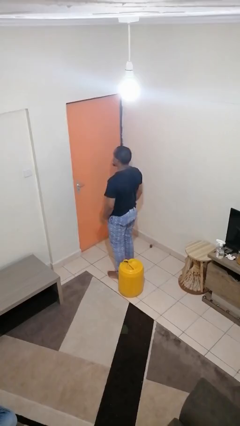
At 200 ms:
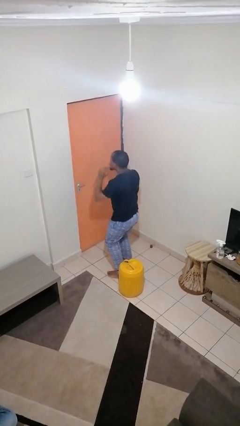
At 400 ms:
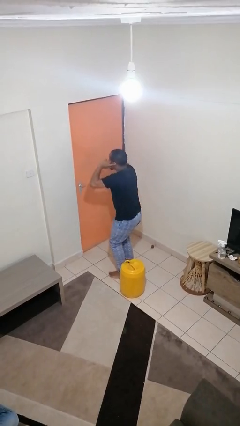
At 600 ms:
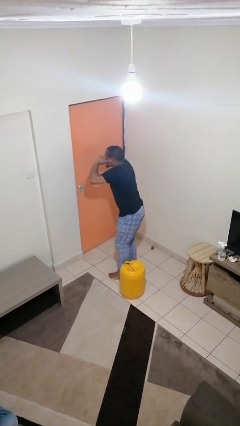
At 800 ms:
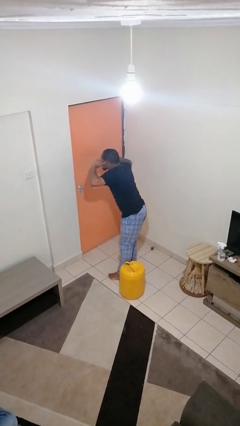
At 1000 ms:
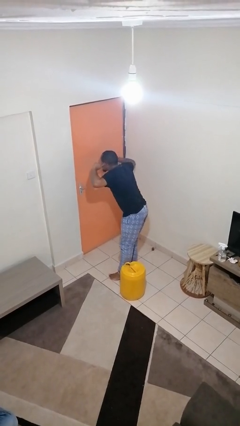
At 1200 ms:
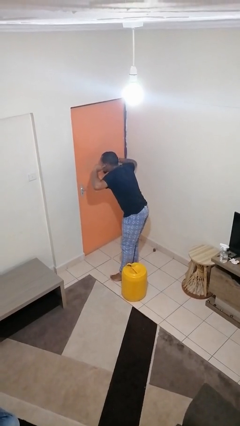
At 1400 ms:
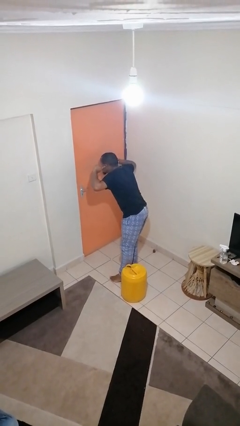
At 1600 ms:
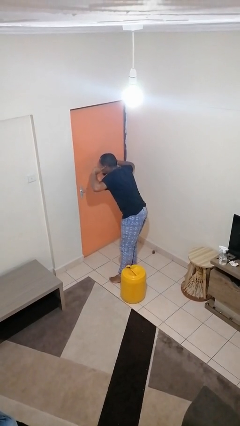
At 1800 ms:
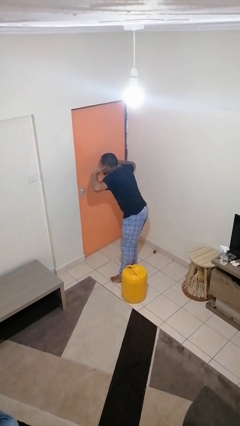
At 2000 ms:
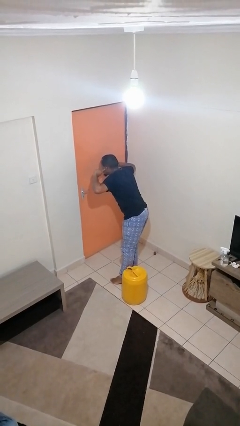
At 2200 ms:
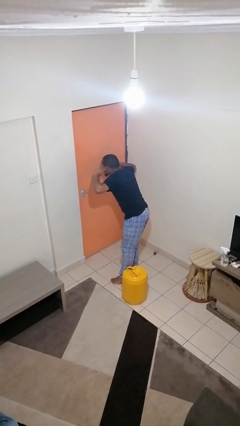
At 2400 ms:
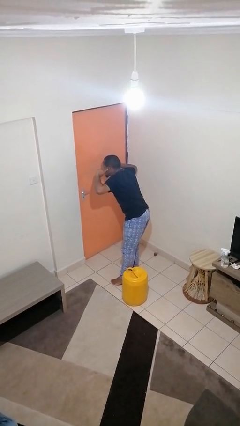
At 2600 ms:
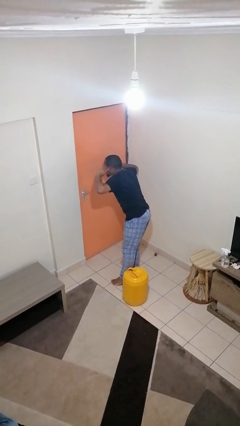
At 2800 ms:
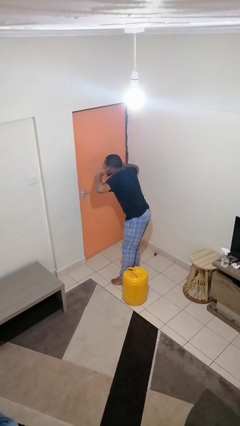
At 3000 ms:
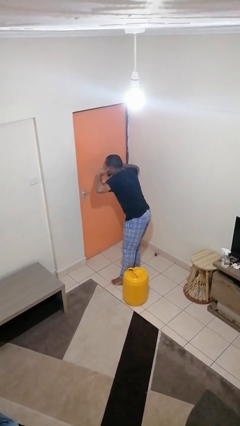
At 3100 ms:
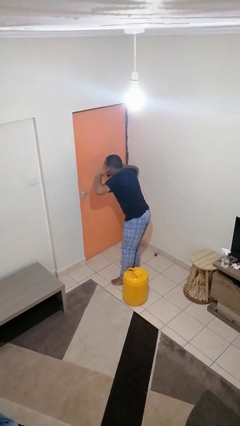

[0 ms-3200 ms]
person puts fingers in ear

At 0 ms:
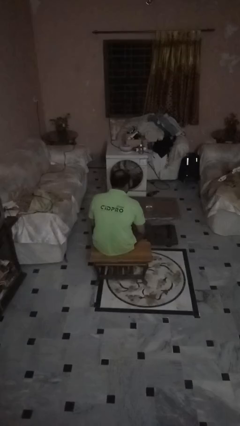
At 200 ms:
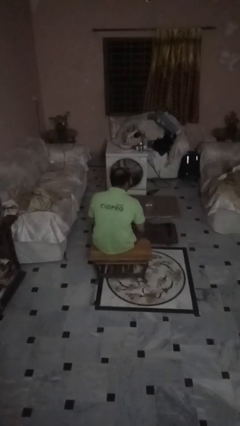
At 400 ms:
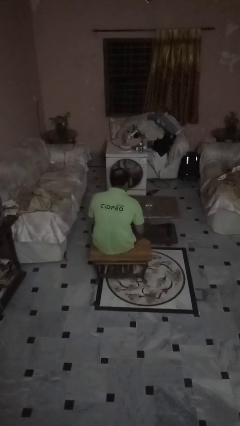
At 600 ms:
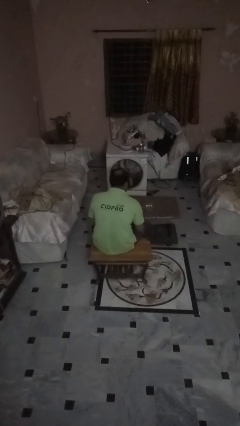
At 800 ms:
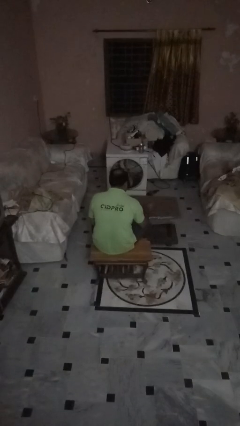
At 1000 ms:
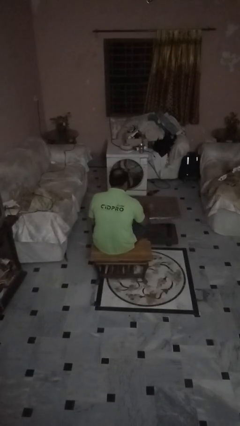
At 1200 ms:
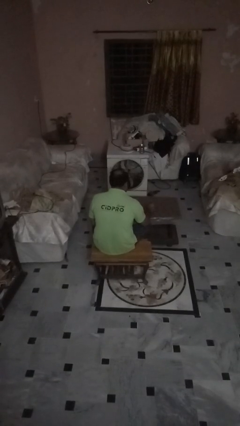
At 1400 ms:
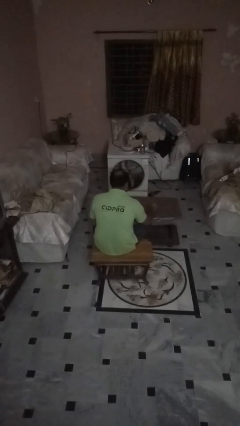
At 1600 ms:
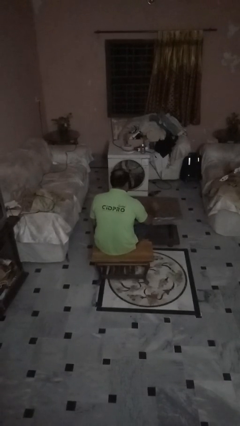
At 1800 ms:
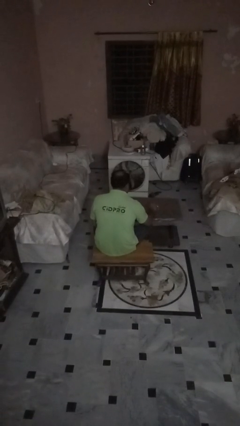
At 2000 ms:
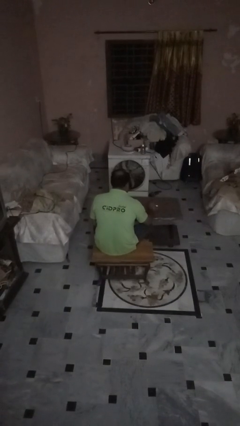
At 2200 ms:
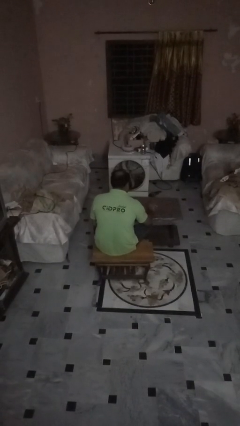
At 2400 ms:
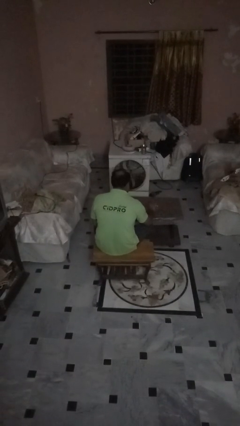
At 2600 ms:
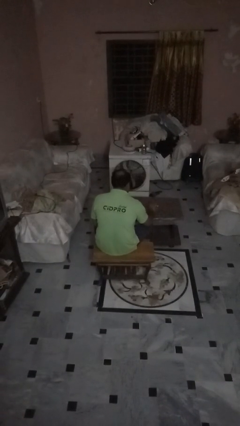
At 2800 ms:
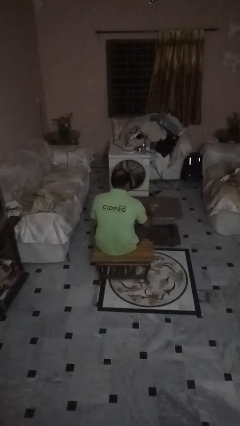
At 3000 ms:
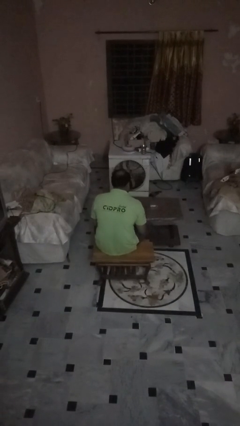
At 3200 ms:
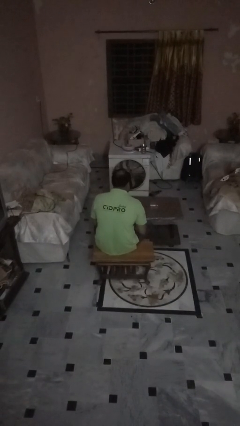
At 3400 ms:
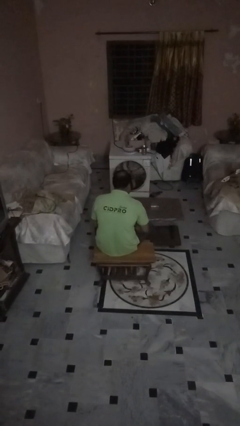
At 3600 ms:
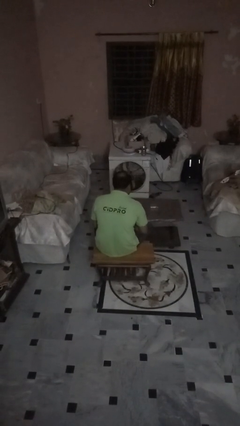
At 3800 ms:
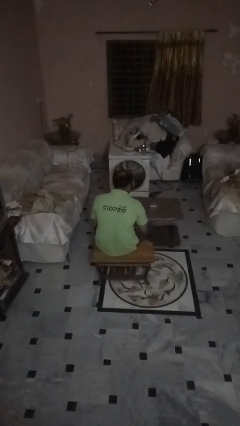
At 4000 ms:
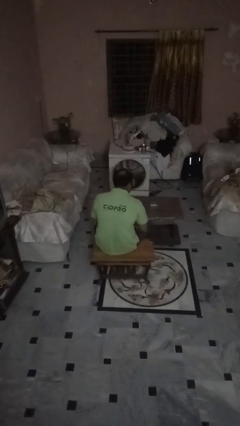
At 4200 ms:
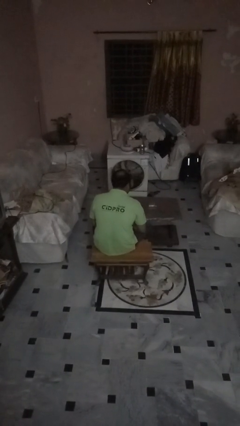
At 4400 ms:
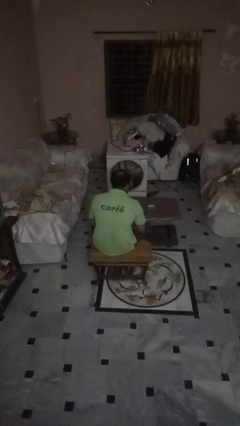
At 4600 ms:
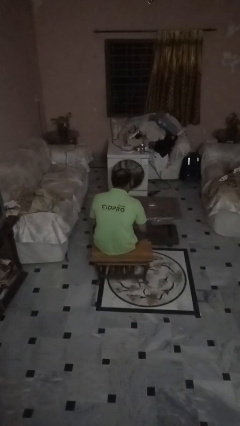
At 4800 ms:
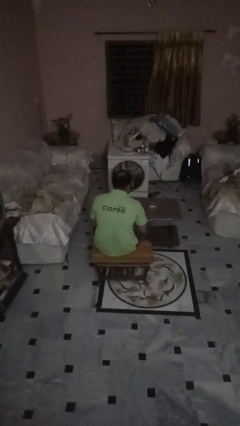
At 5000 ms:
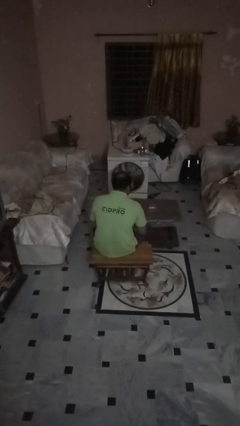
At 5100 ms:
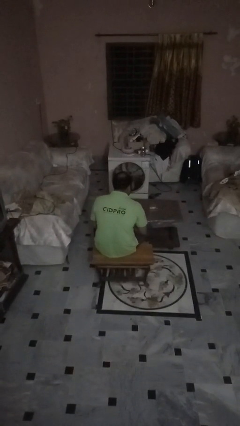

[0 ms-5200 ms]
person spills on table

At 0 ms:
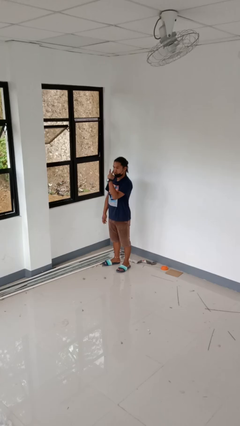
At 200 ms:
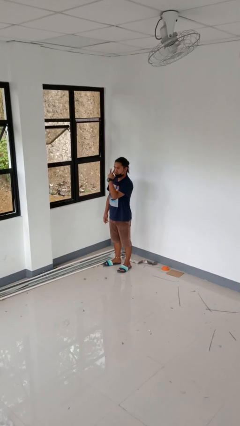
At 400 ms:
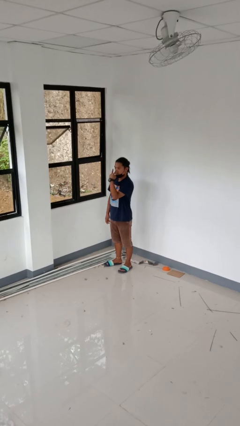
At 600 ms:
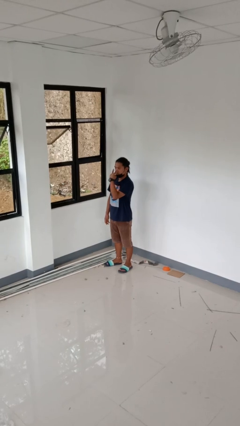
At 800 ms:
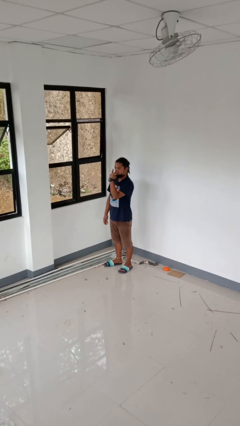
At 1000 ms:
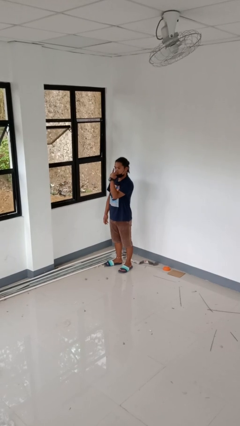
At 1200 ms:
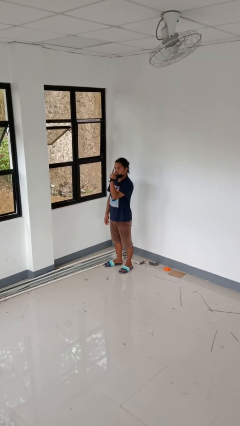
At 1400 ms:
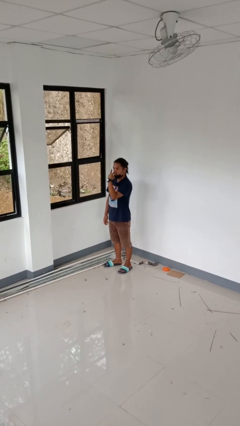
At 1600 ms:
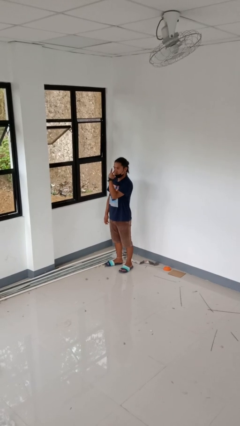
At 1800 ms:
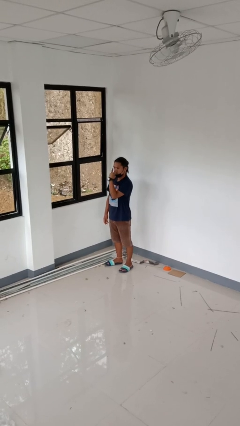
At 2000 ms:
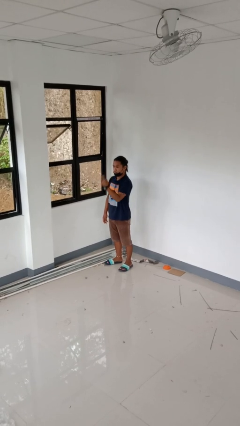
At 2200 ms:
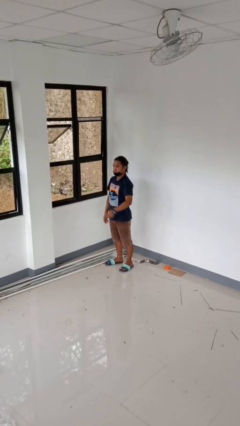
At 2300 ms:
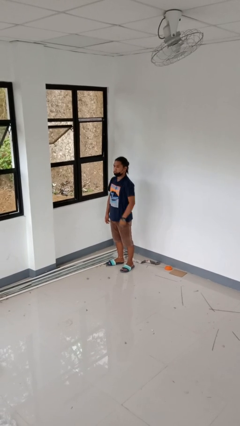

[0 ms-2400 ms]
person gestures watch closely

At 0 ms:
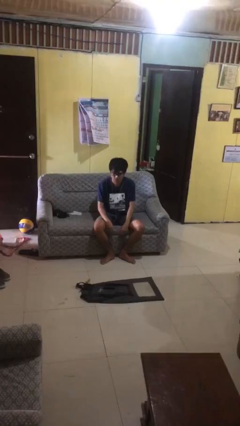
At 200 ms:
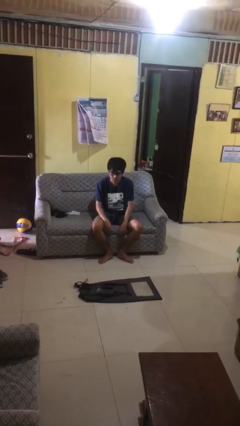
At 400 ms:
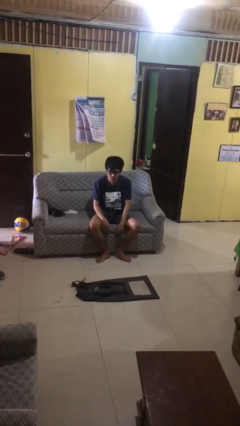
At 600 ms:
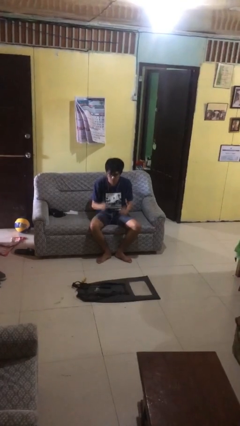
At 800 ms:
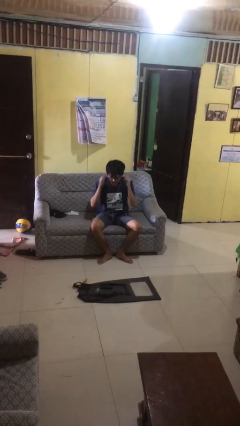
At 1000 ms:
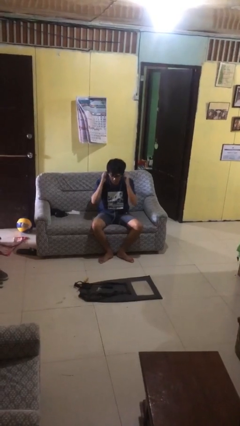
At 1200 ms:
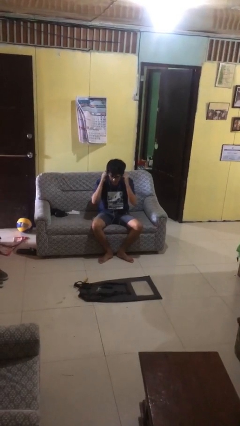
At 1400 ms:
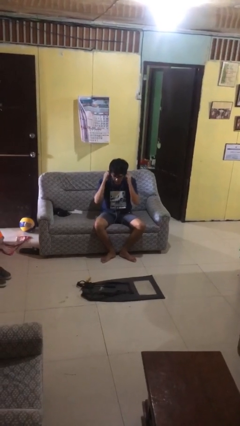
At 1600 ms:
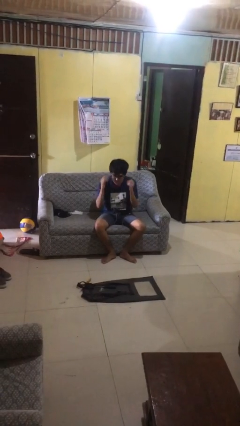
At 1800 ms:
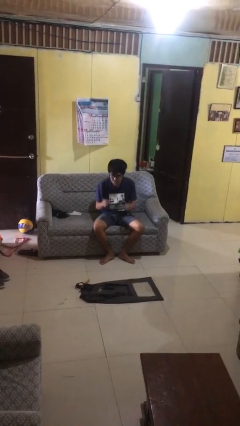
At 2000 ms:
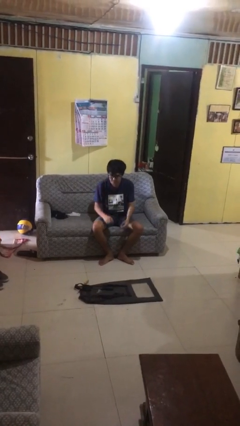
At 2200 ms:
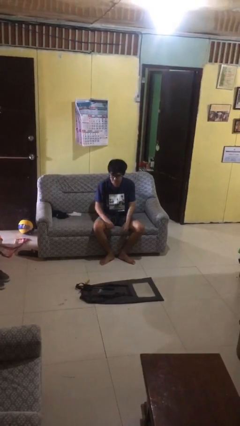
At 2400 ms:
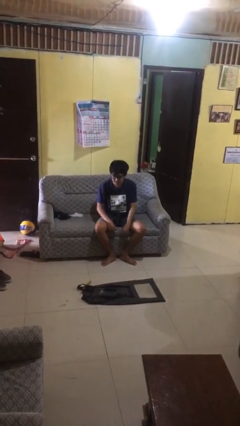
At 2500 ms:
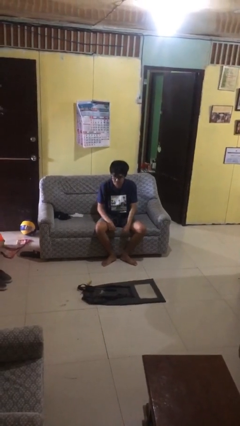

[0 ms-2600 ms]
person takes off headphones

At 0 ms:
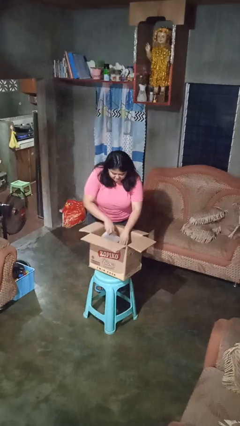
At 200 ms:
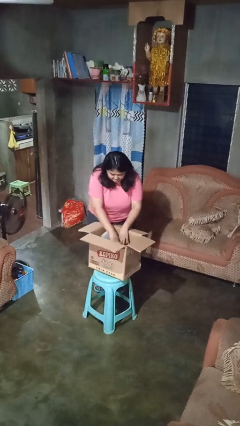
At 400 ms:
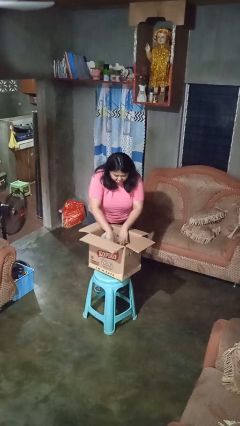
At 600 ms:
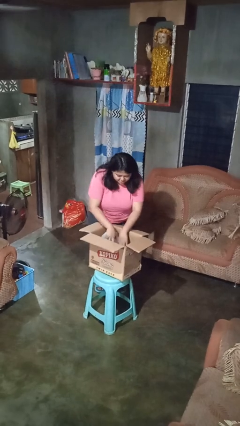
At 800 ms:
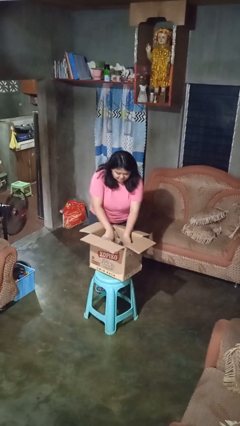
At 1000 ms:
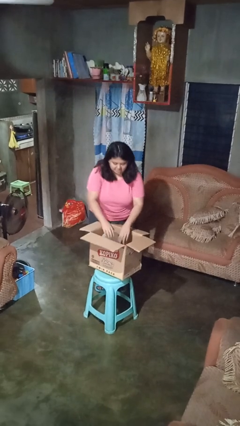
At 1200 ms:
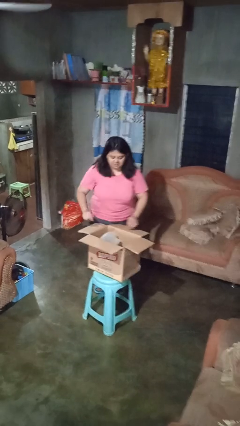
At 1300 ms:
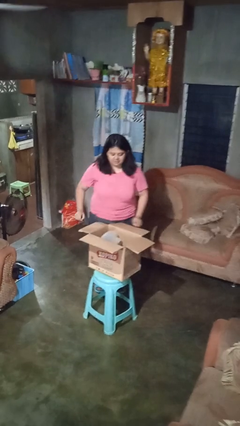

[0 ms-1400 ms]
person searches in box

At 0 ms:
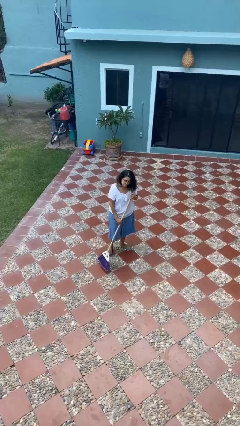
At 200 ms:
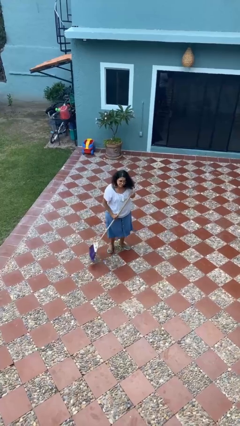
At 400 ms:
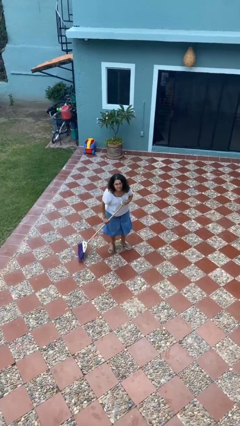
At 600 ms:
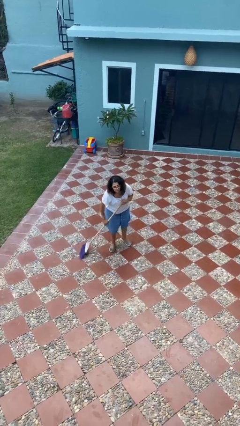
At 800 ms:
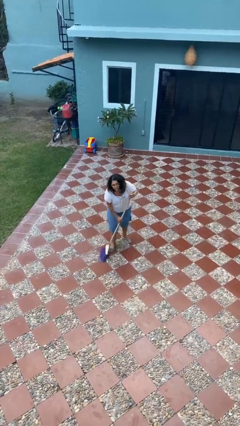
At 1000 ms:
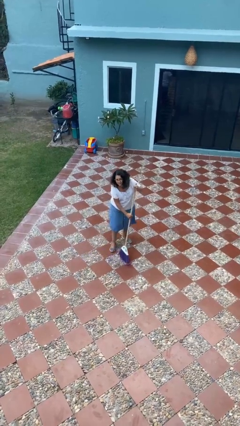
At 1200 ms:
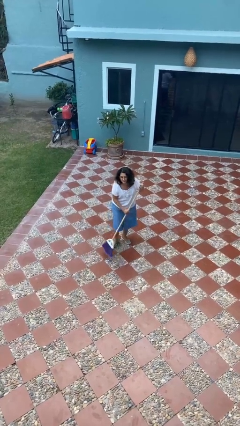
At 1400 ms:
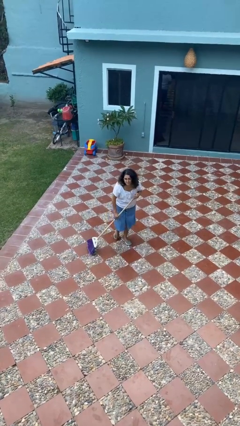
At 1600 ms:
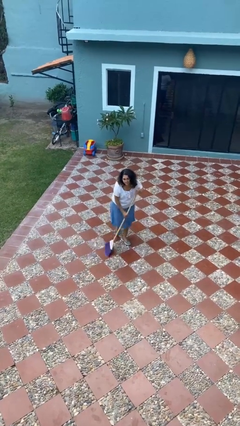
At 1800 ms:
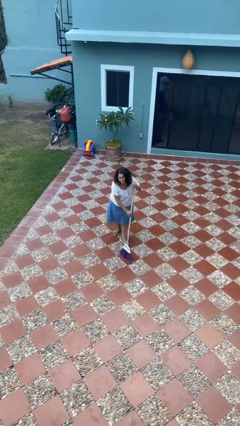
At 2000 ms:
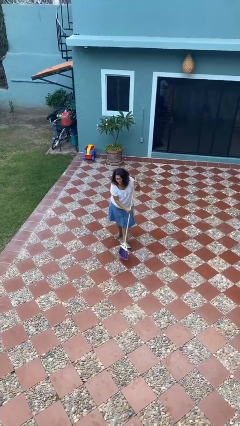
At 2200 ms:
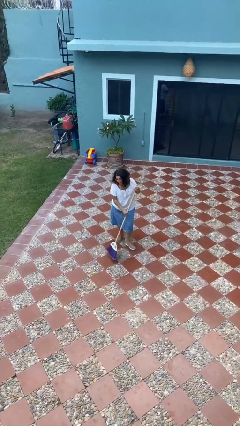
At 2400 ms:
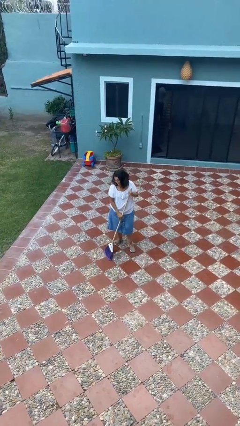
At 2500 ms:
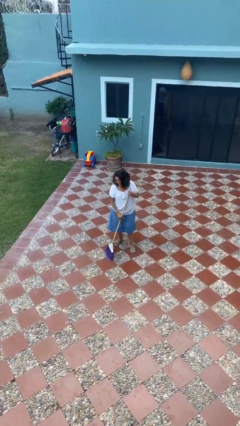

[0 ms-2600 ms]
person sweeps floor
